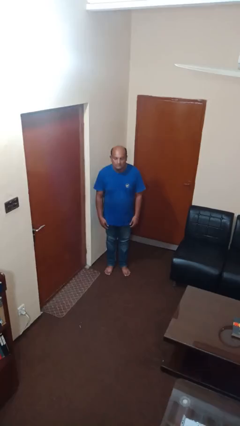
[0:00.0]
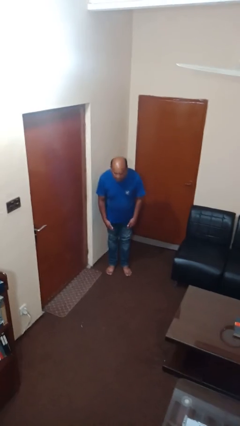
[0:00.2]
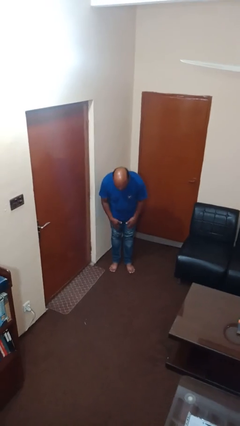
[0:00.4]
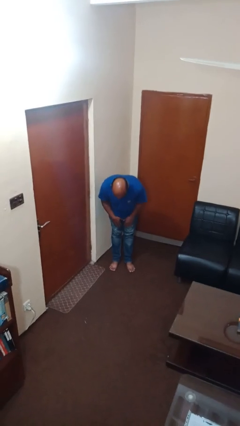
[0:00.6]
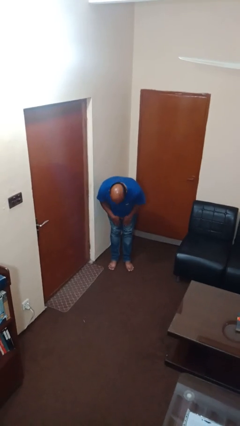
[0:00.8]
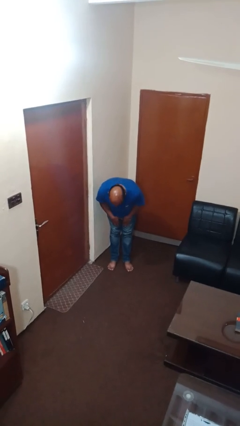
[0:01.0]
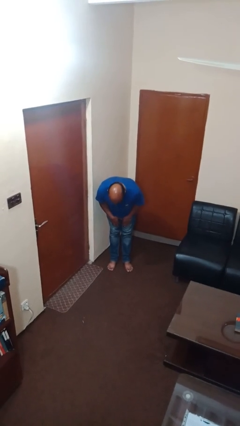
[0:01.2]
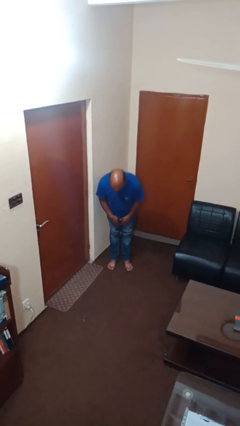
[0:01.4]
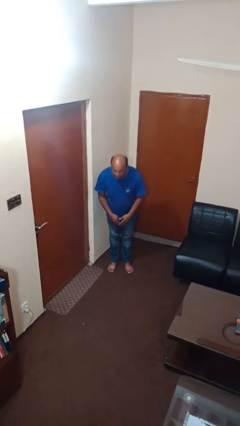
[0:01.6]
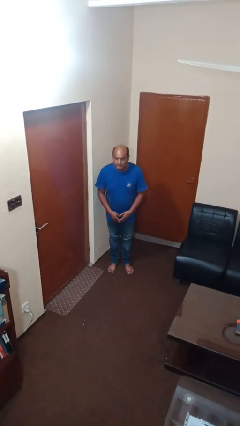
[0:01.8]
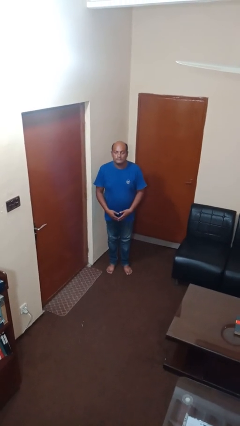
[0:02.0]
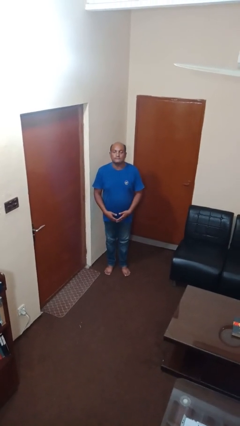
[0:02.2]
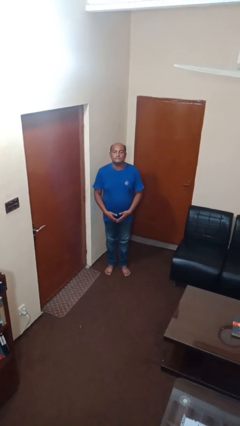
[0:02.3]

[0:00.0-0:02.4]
person bows

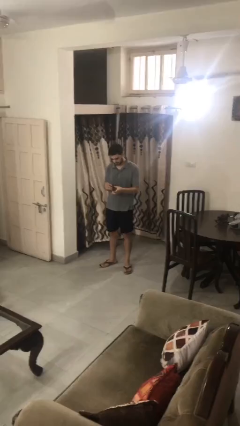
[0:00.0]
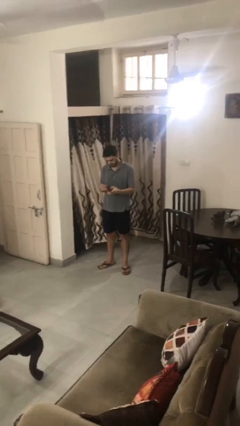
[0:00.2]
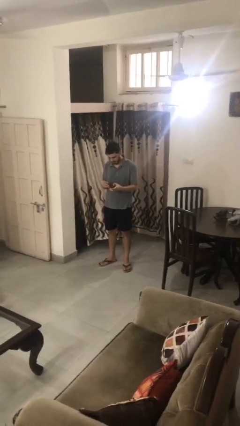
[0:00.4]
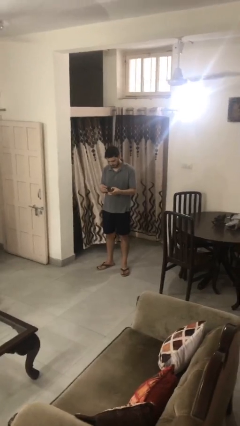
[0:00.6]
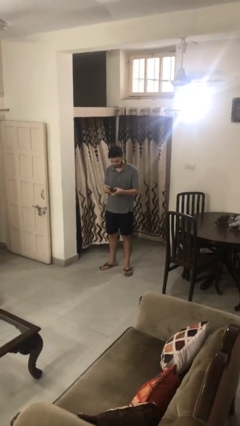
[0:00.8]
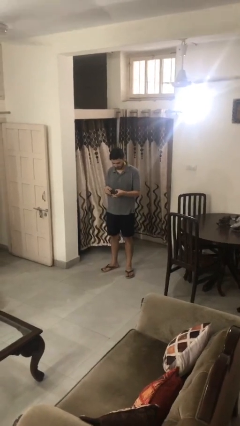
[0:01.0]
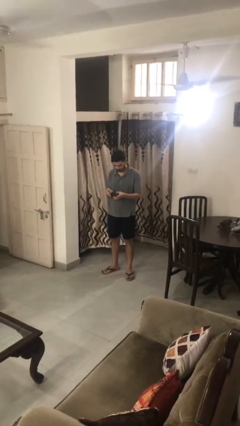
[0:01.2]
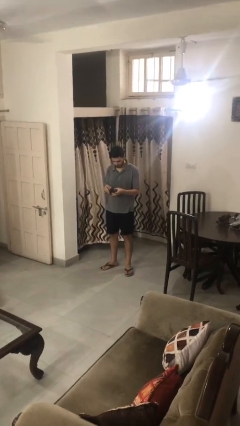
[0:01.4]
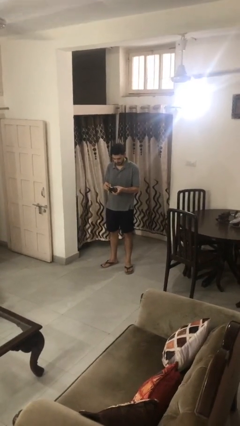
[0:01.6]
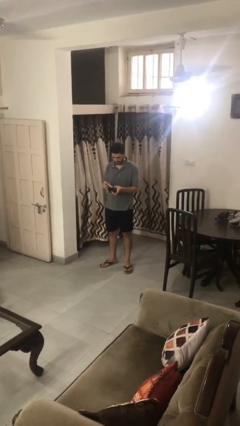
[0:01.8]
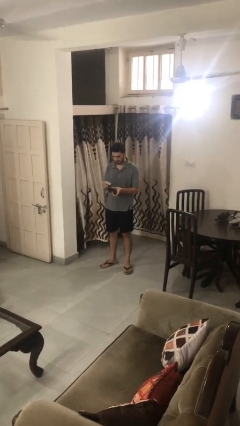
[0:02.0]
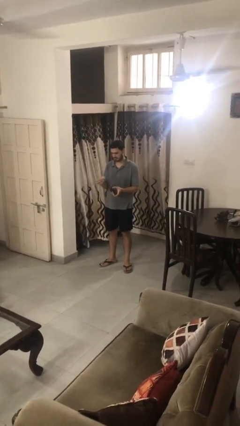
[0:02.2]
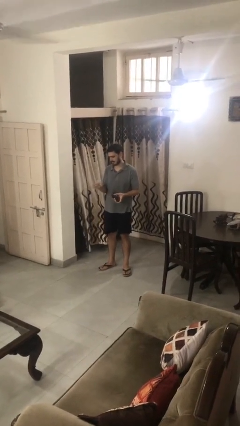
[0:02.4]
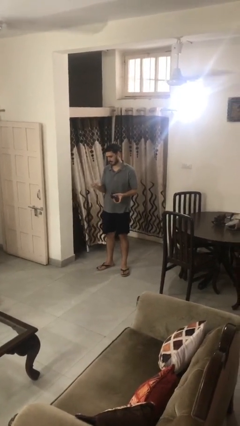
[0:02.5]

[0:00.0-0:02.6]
person takes object from purse

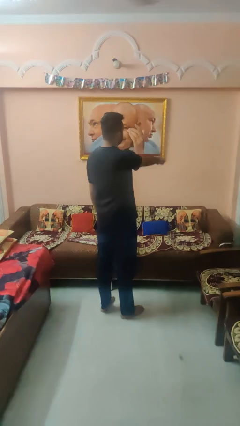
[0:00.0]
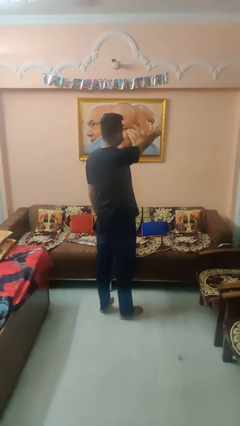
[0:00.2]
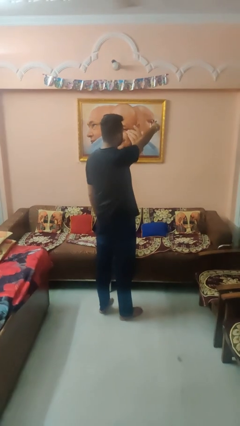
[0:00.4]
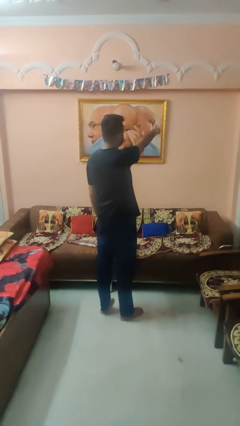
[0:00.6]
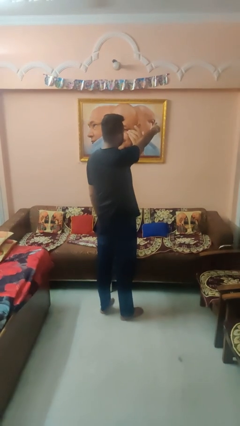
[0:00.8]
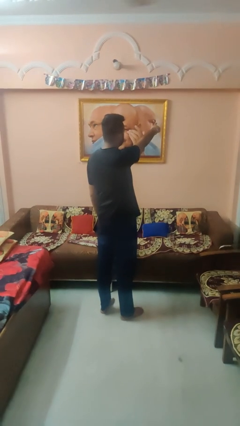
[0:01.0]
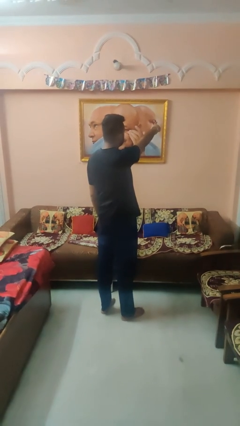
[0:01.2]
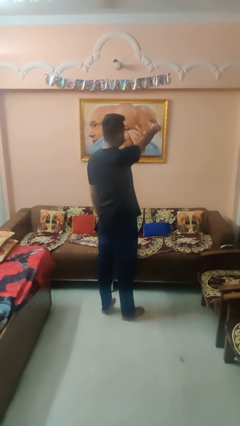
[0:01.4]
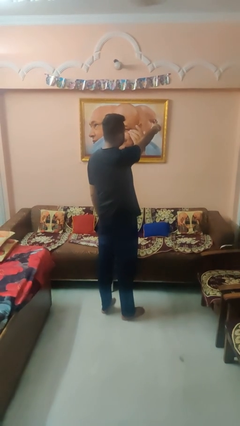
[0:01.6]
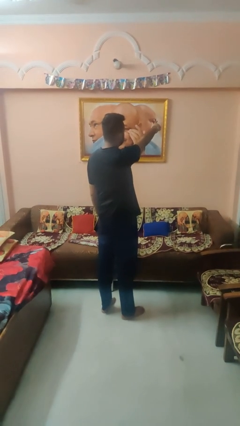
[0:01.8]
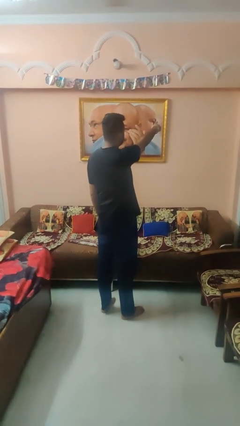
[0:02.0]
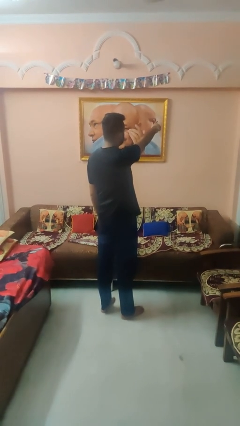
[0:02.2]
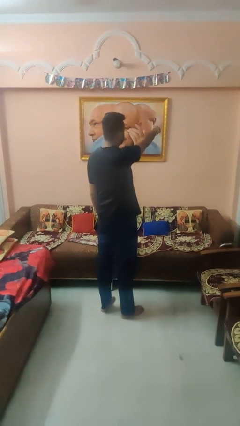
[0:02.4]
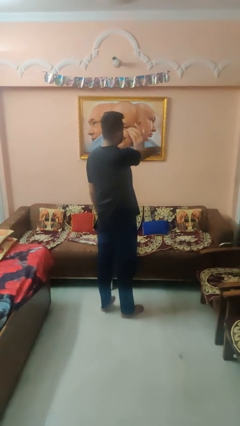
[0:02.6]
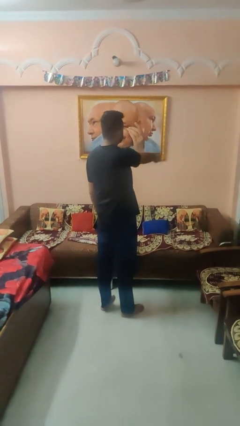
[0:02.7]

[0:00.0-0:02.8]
person points at person

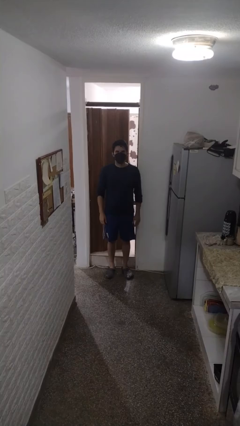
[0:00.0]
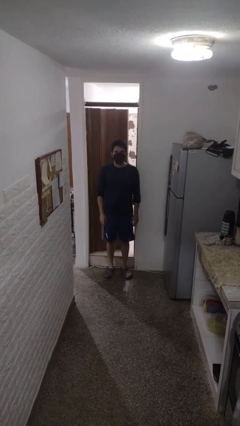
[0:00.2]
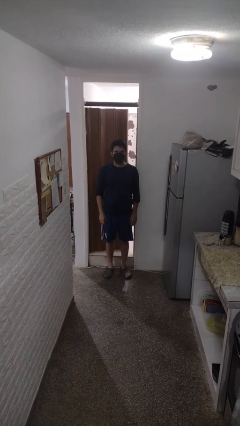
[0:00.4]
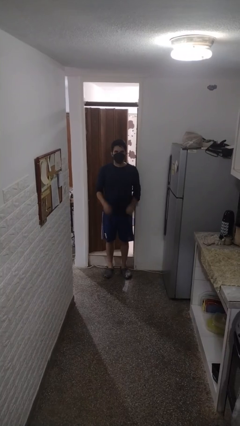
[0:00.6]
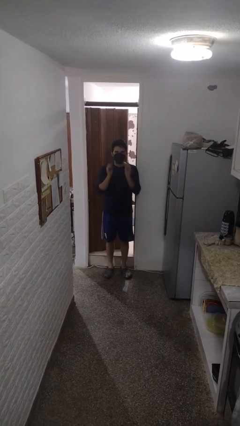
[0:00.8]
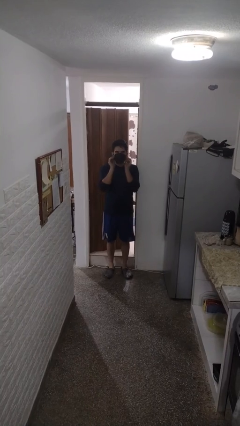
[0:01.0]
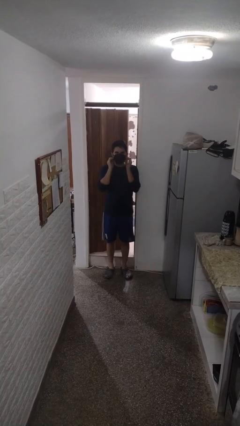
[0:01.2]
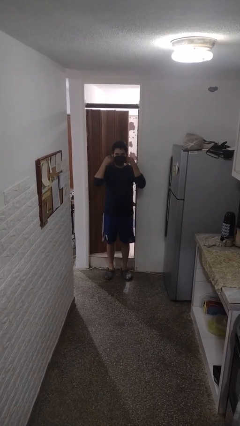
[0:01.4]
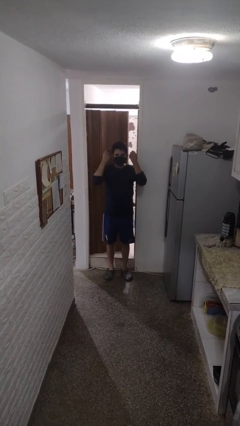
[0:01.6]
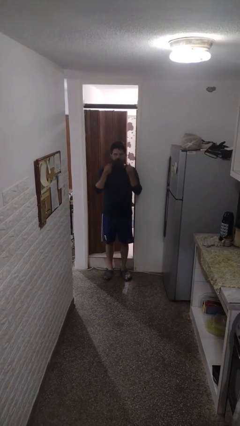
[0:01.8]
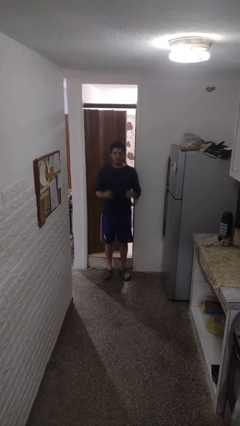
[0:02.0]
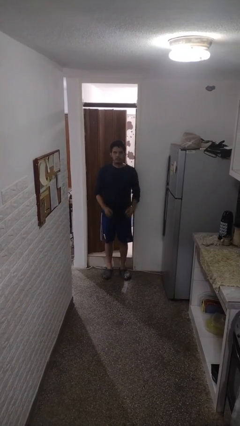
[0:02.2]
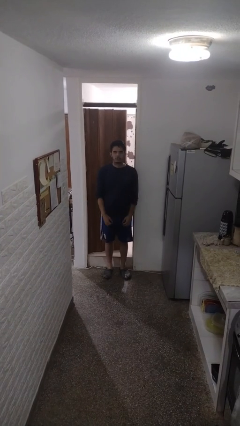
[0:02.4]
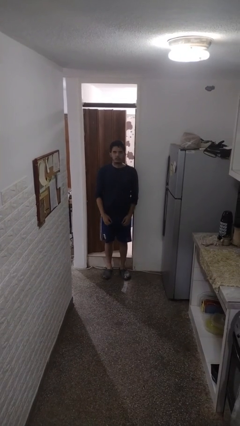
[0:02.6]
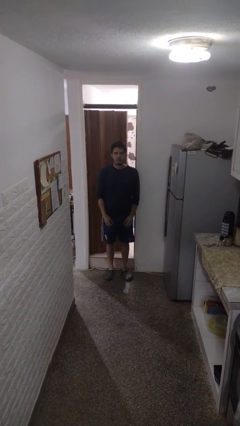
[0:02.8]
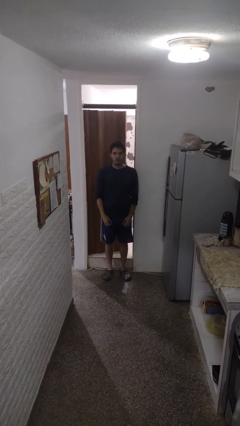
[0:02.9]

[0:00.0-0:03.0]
person takes off facemask

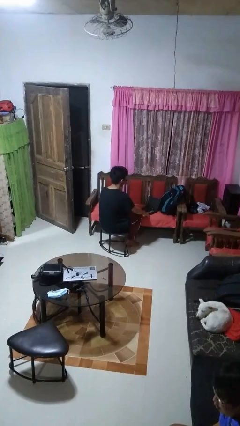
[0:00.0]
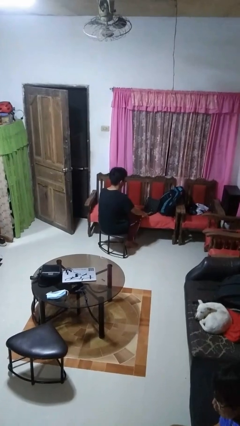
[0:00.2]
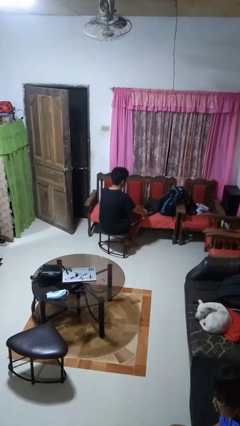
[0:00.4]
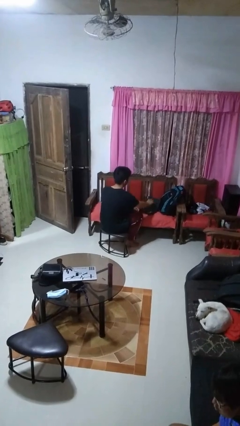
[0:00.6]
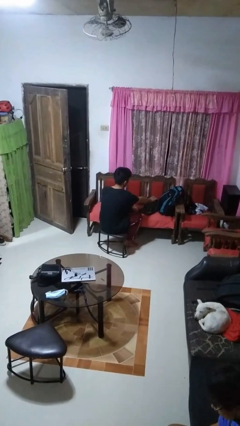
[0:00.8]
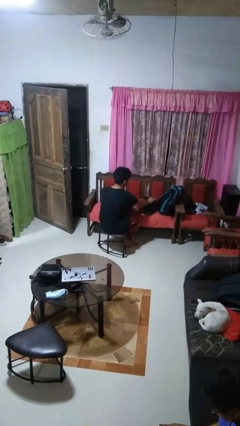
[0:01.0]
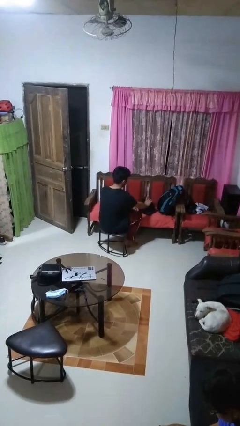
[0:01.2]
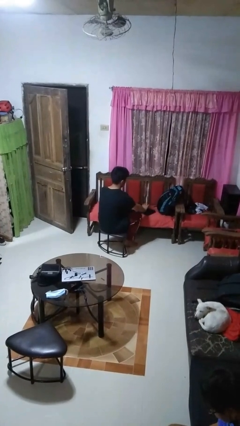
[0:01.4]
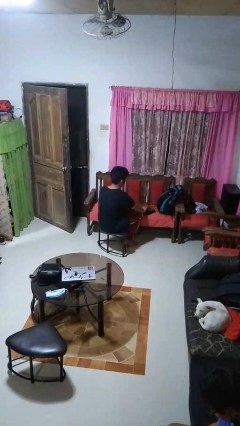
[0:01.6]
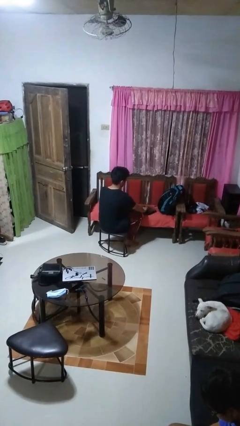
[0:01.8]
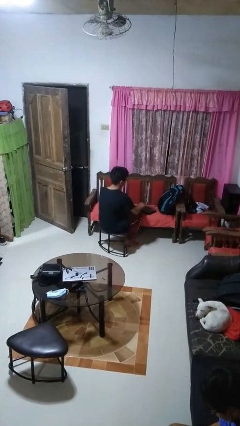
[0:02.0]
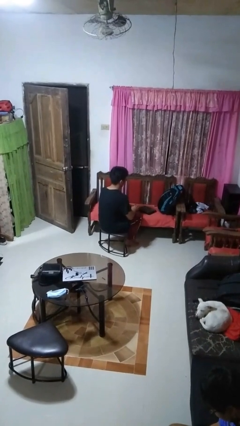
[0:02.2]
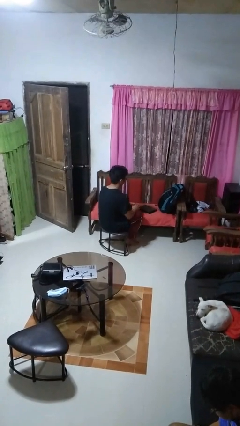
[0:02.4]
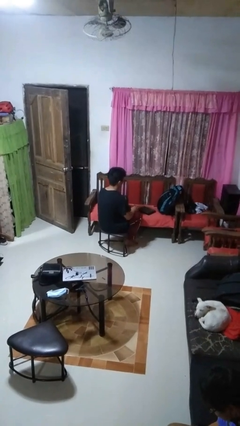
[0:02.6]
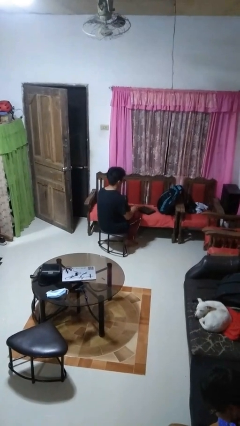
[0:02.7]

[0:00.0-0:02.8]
person closes laptop

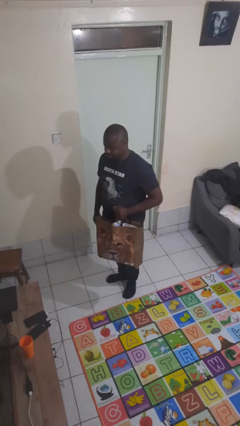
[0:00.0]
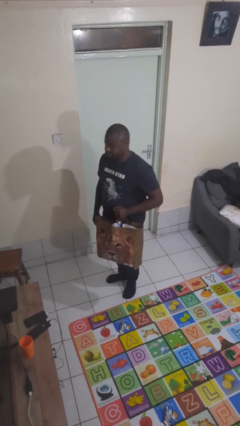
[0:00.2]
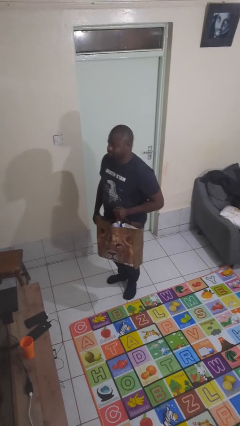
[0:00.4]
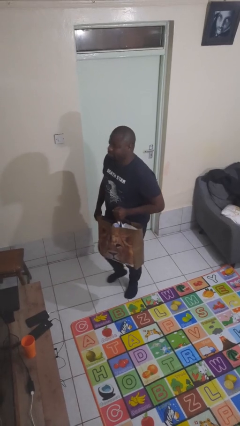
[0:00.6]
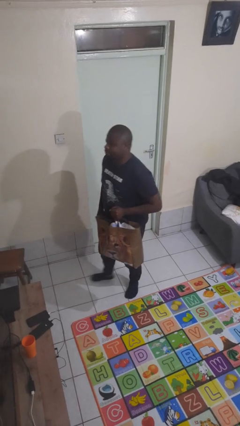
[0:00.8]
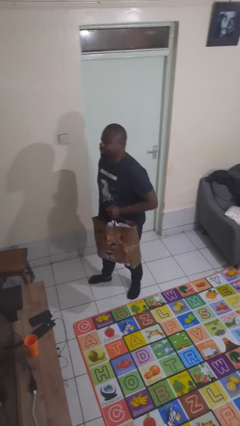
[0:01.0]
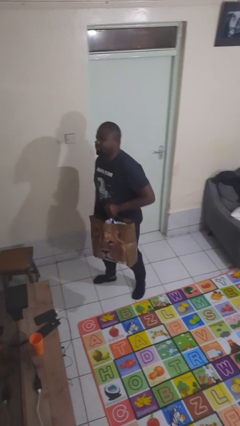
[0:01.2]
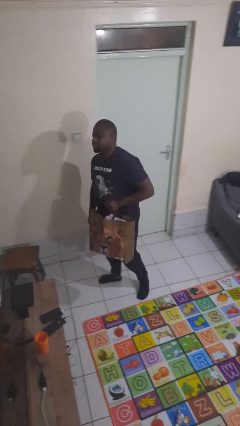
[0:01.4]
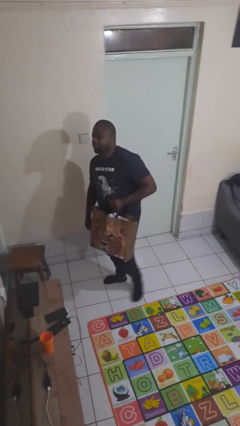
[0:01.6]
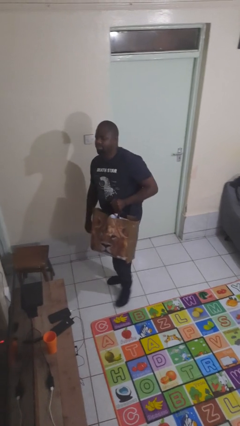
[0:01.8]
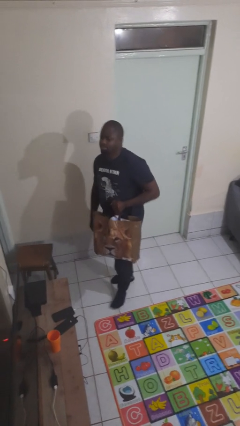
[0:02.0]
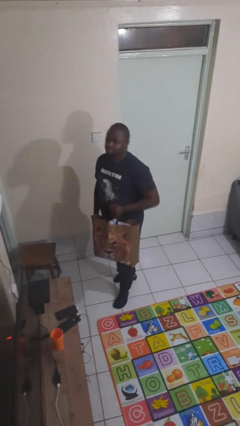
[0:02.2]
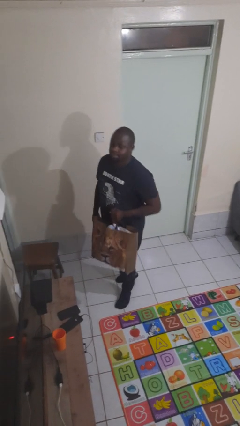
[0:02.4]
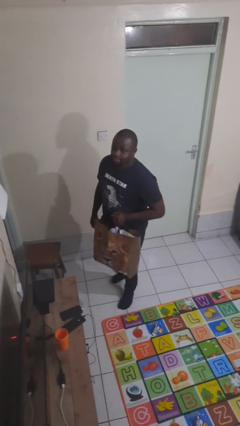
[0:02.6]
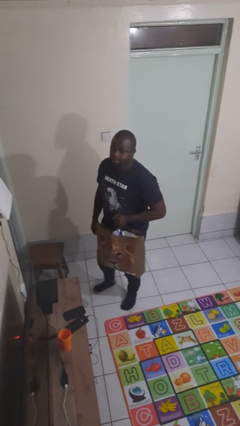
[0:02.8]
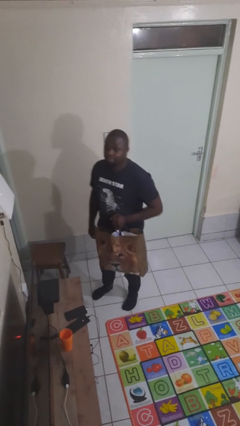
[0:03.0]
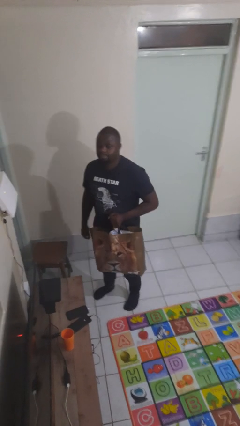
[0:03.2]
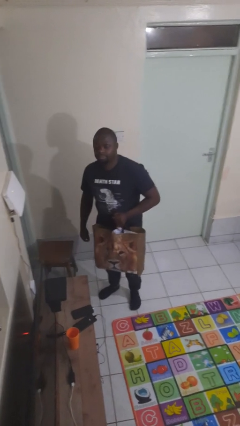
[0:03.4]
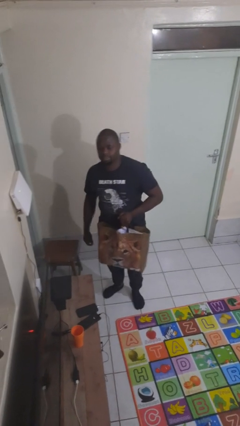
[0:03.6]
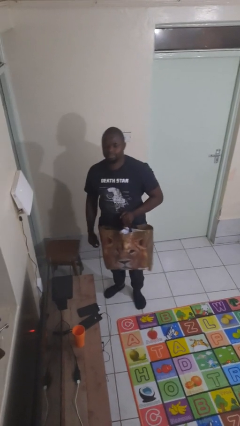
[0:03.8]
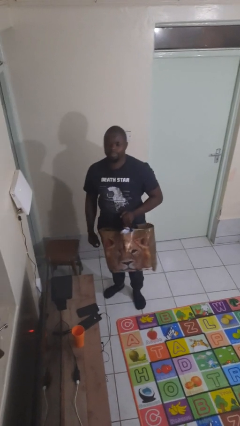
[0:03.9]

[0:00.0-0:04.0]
person carries groceries

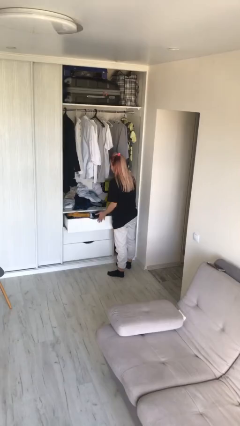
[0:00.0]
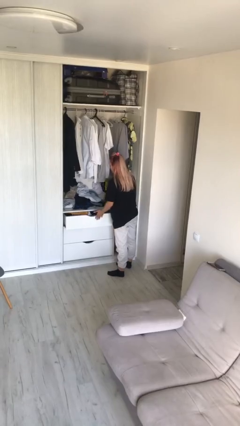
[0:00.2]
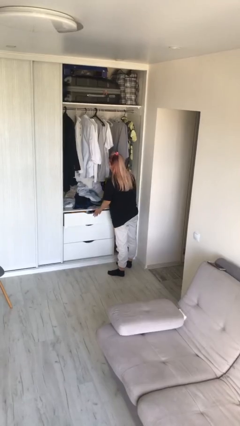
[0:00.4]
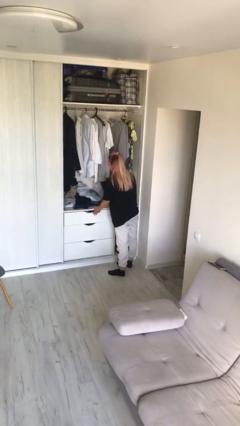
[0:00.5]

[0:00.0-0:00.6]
person closes dresser drawer
